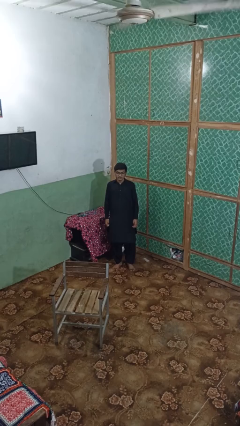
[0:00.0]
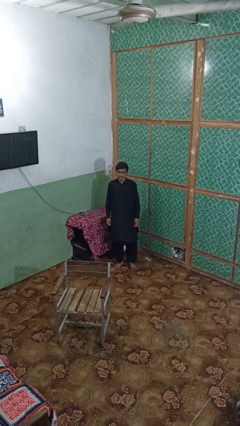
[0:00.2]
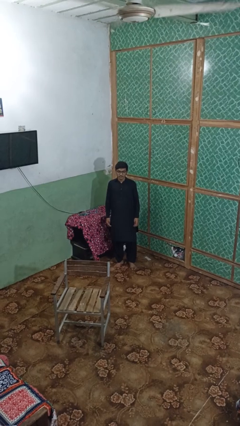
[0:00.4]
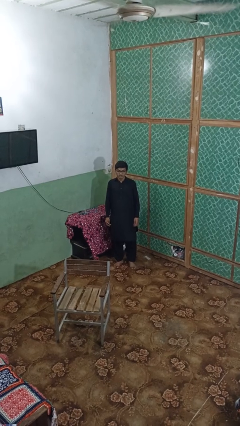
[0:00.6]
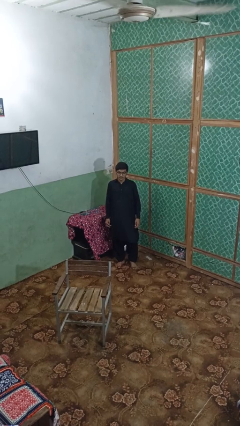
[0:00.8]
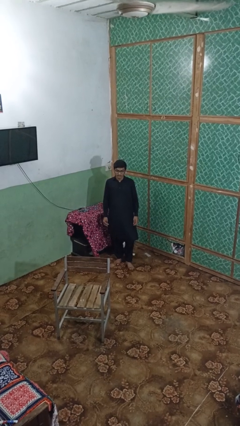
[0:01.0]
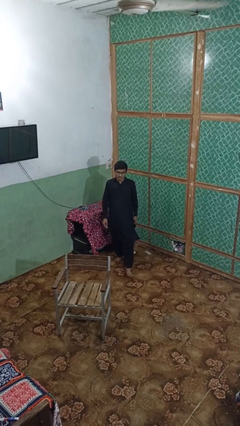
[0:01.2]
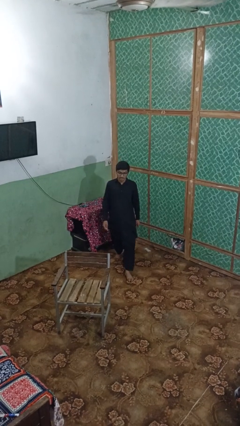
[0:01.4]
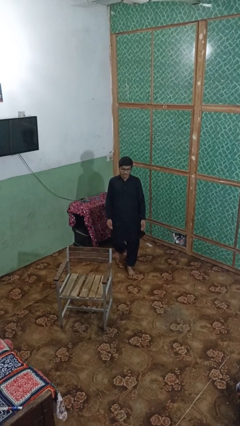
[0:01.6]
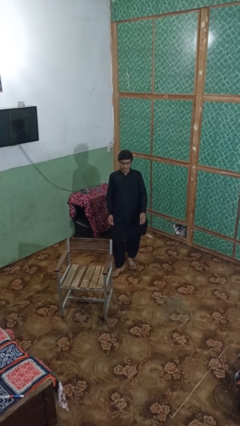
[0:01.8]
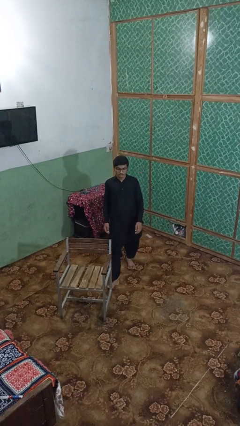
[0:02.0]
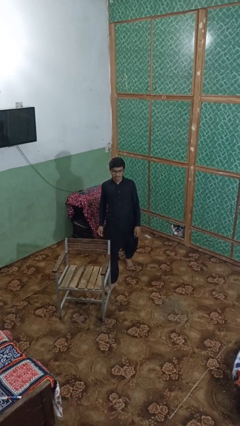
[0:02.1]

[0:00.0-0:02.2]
person trips on object on floor

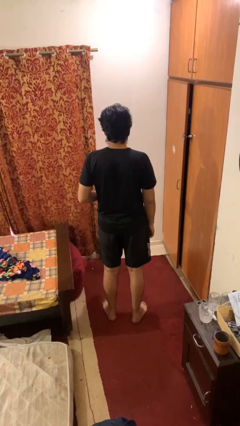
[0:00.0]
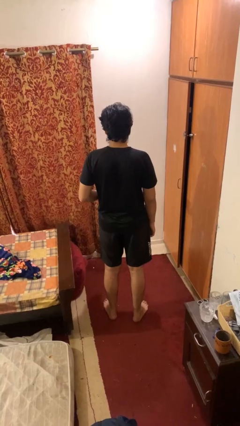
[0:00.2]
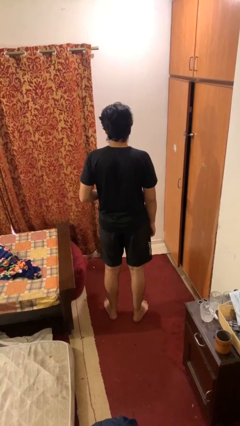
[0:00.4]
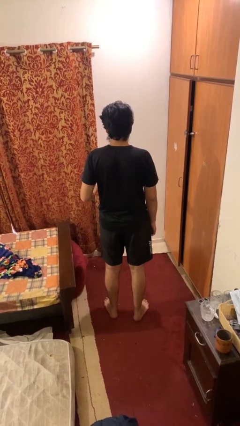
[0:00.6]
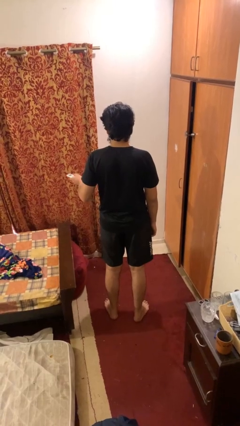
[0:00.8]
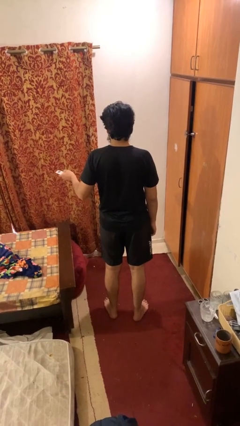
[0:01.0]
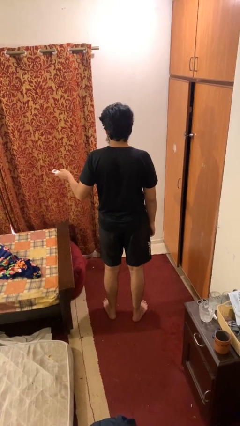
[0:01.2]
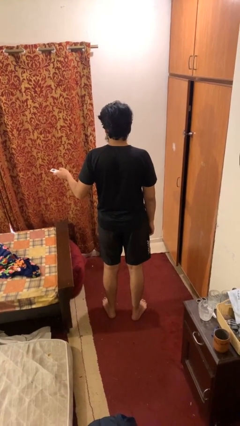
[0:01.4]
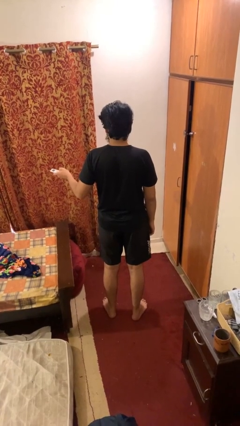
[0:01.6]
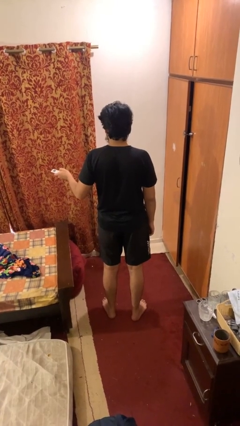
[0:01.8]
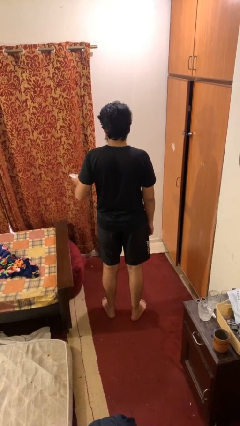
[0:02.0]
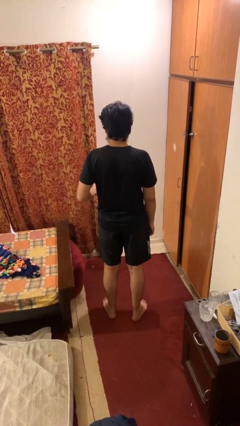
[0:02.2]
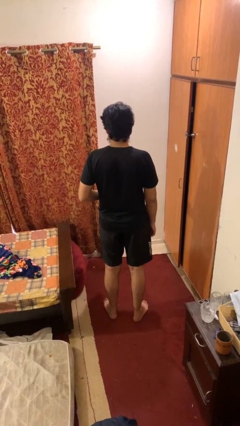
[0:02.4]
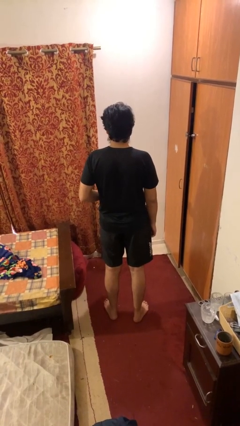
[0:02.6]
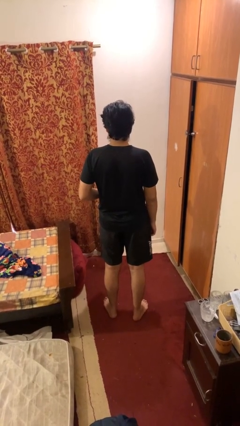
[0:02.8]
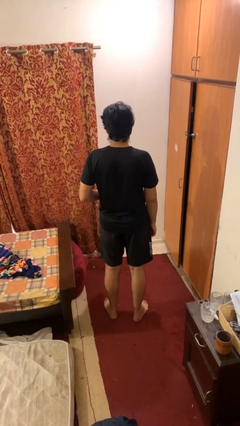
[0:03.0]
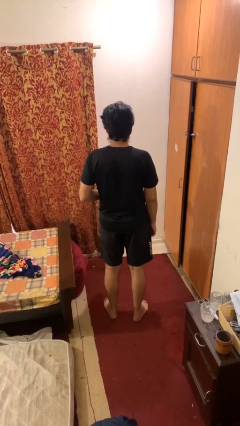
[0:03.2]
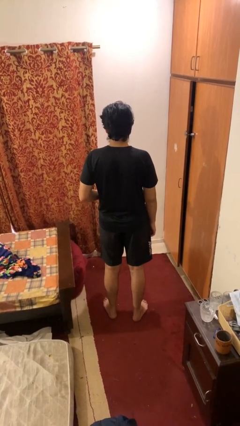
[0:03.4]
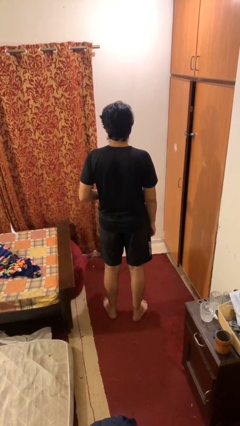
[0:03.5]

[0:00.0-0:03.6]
person uses television remote

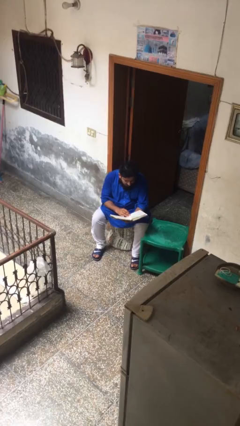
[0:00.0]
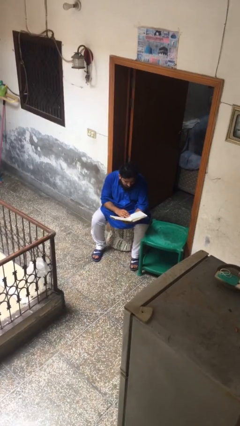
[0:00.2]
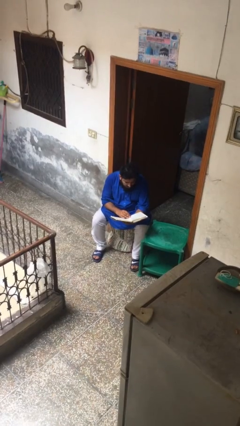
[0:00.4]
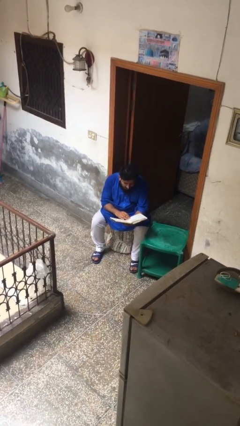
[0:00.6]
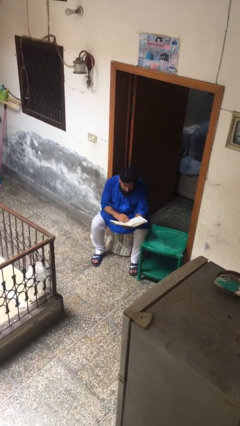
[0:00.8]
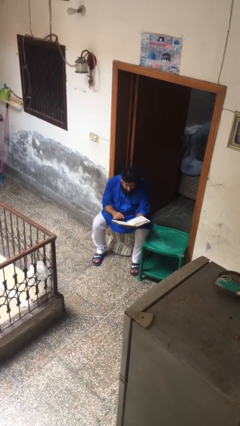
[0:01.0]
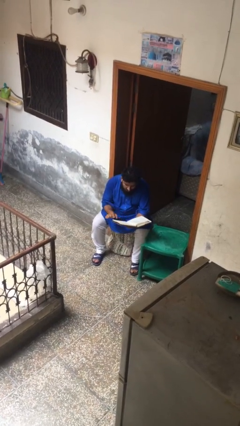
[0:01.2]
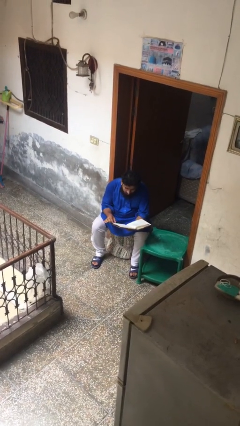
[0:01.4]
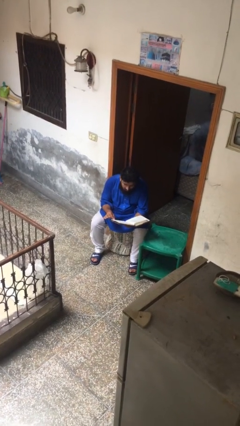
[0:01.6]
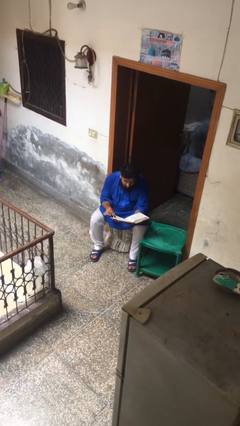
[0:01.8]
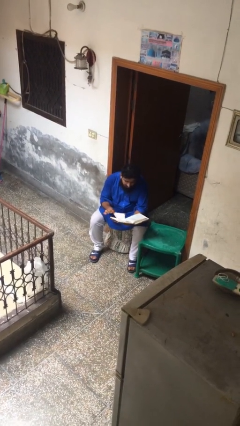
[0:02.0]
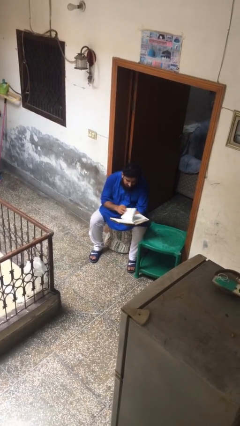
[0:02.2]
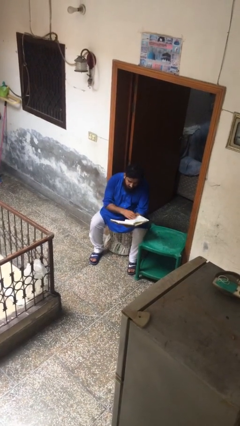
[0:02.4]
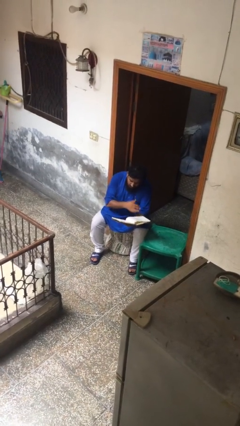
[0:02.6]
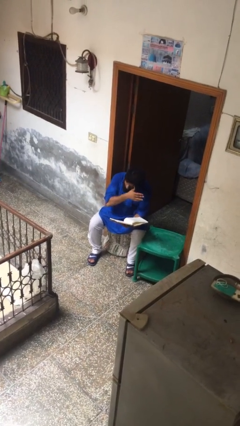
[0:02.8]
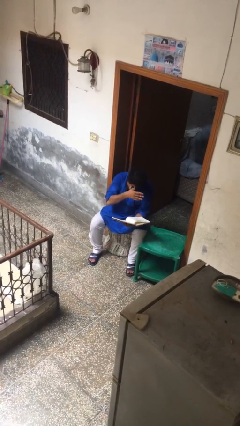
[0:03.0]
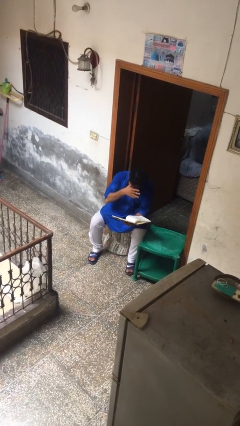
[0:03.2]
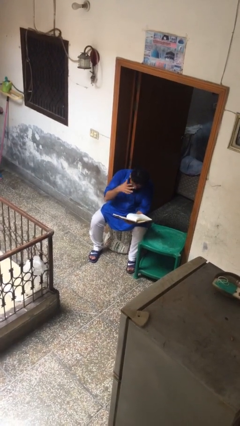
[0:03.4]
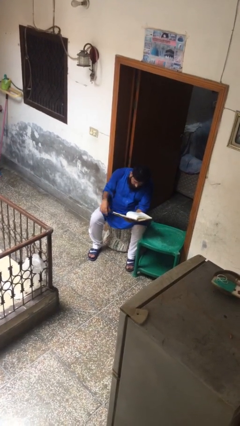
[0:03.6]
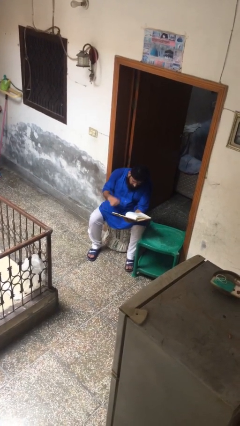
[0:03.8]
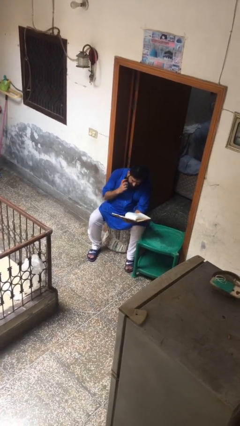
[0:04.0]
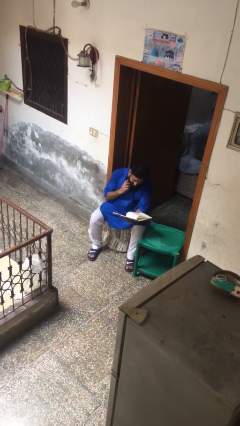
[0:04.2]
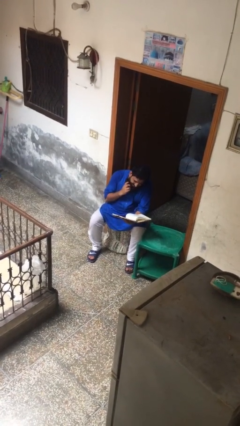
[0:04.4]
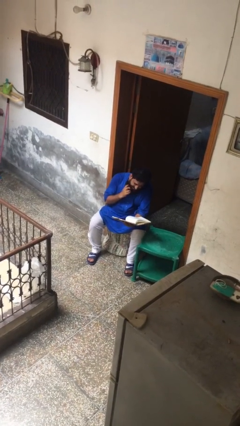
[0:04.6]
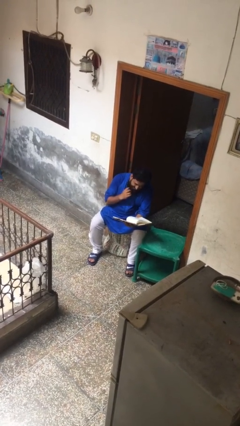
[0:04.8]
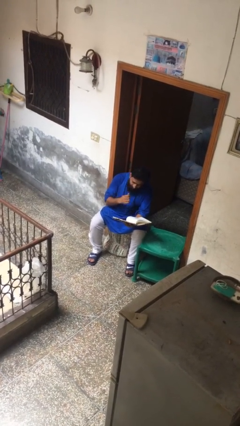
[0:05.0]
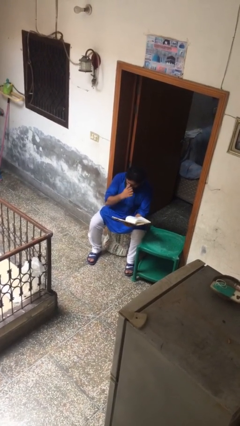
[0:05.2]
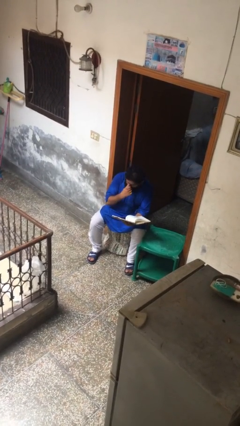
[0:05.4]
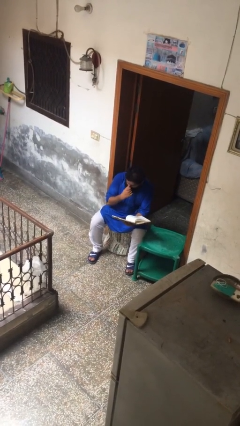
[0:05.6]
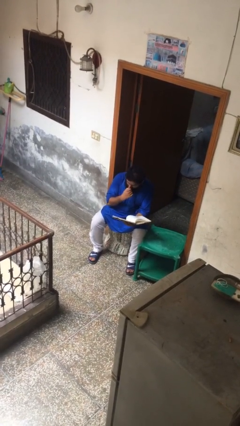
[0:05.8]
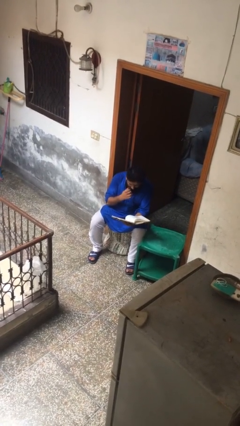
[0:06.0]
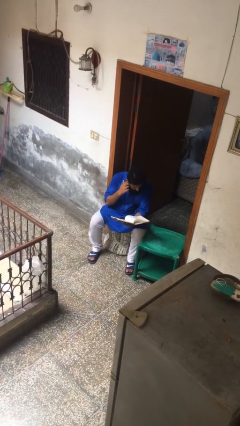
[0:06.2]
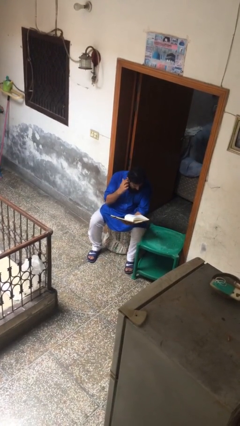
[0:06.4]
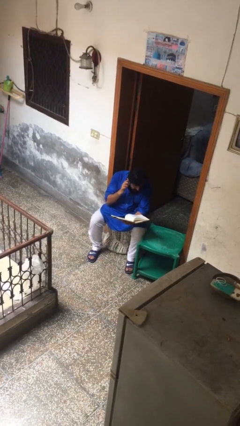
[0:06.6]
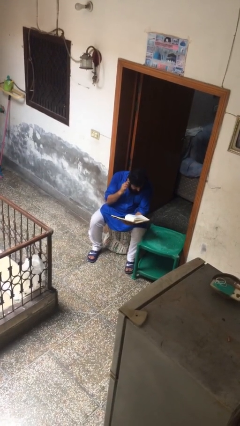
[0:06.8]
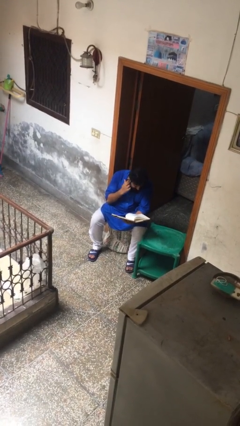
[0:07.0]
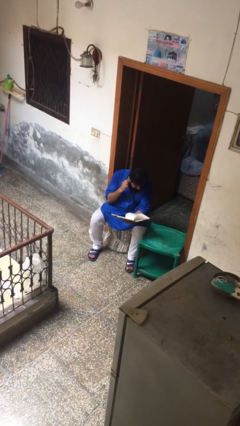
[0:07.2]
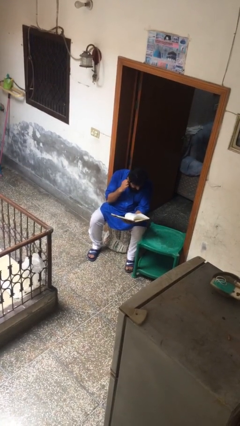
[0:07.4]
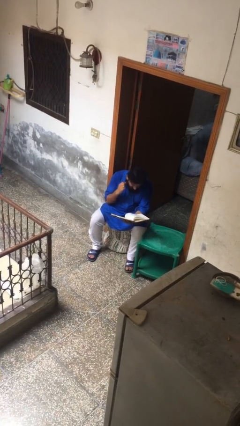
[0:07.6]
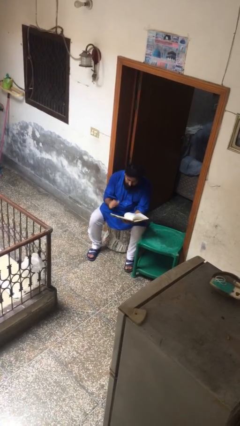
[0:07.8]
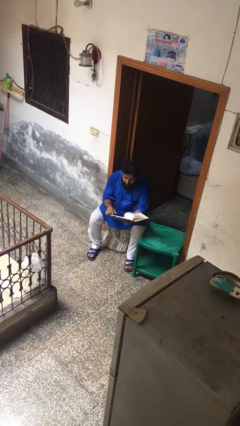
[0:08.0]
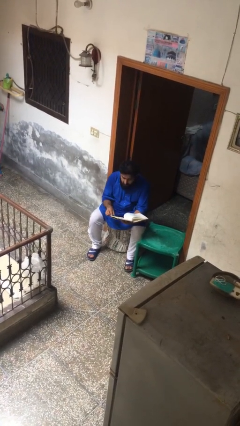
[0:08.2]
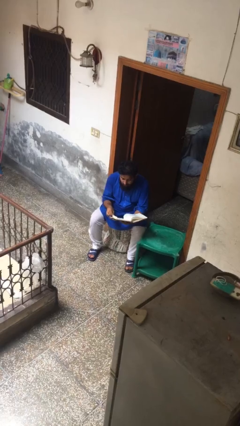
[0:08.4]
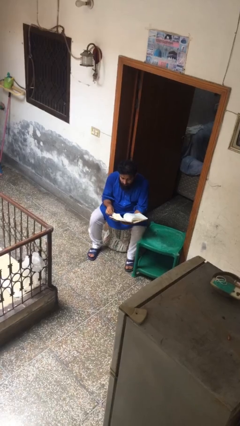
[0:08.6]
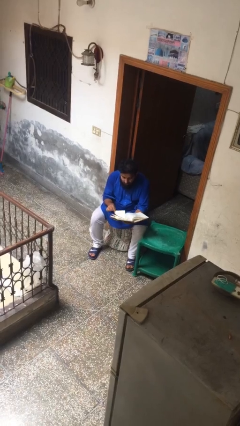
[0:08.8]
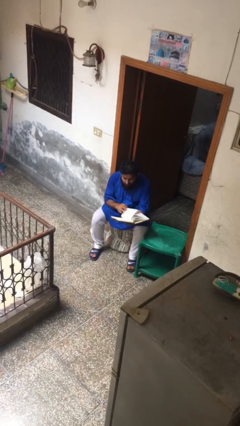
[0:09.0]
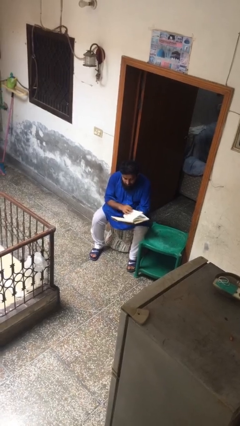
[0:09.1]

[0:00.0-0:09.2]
person reads document

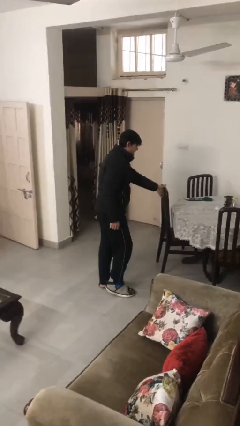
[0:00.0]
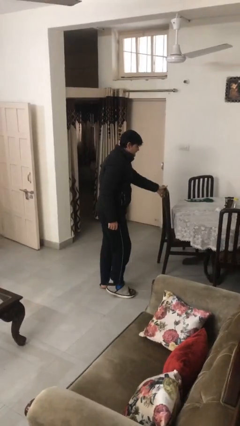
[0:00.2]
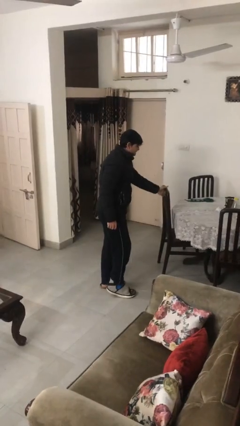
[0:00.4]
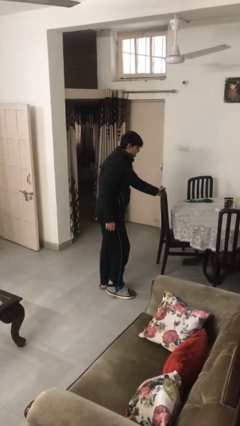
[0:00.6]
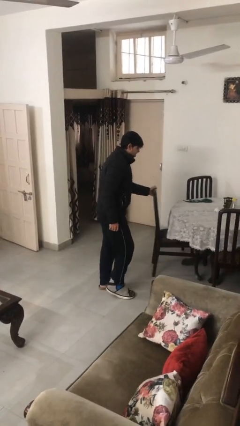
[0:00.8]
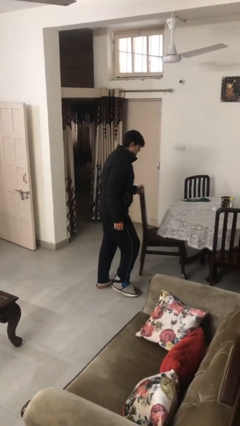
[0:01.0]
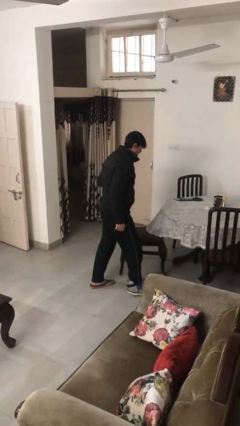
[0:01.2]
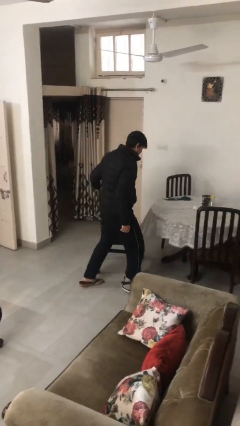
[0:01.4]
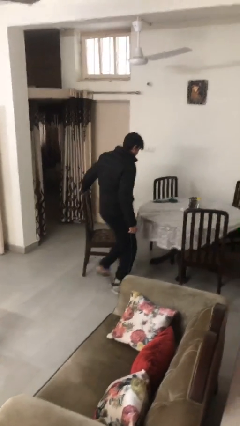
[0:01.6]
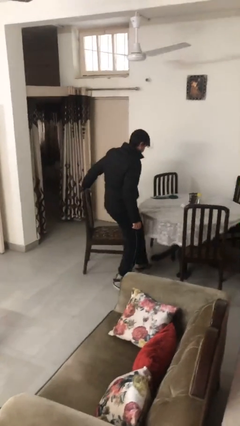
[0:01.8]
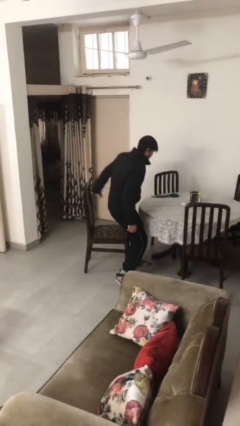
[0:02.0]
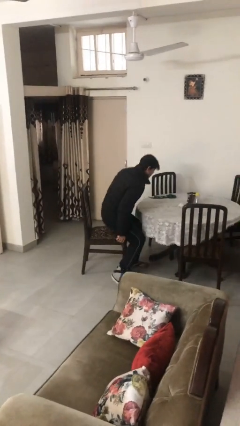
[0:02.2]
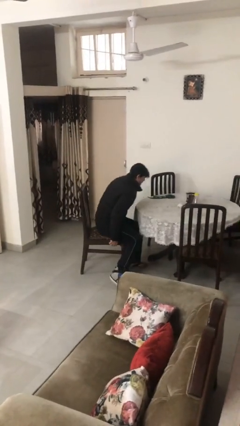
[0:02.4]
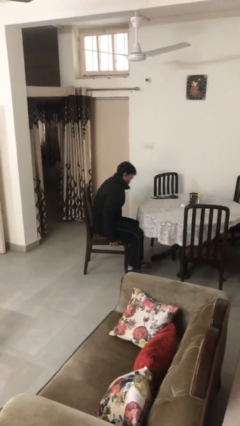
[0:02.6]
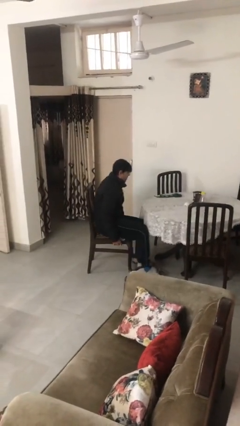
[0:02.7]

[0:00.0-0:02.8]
person sits down
